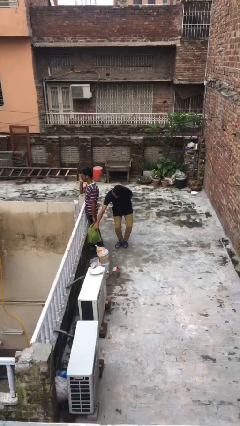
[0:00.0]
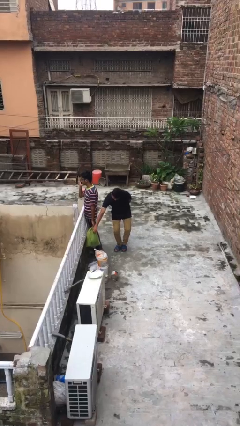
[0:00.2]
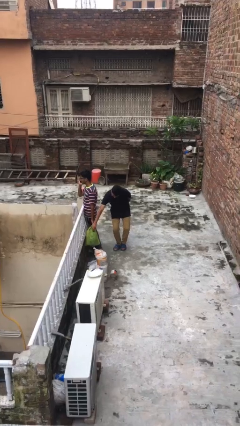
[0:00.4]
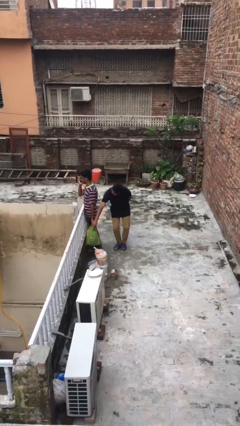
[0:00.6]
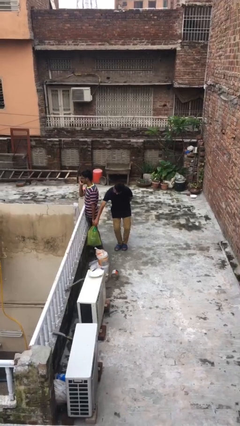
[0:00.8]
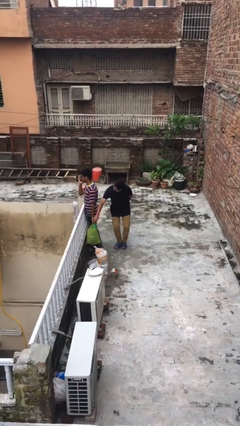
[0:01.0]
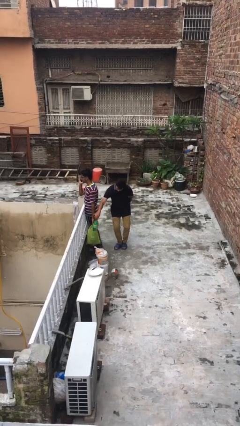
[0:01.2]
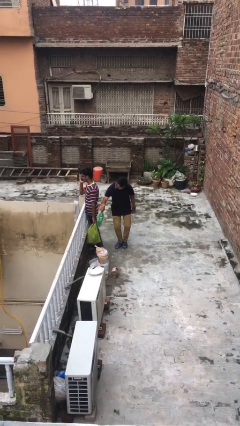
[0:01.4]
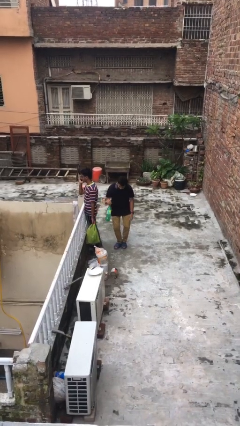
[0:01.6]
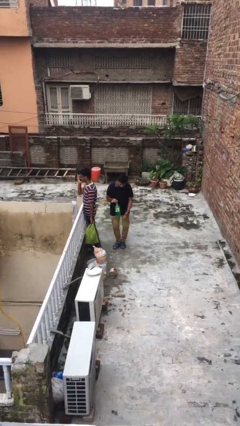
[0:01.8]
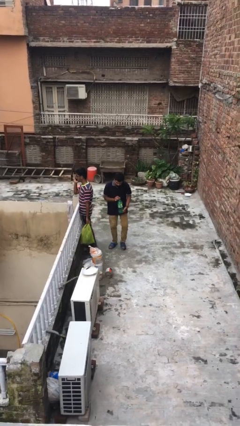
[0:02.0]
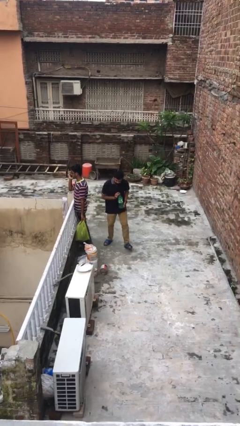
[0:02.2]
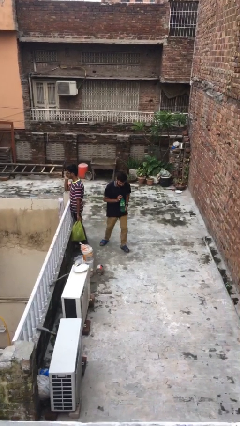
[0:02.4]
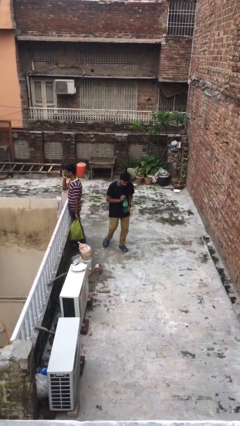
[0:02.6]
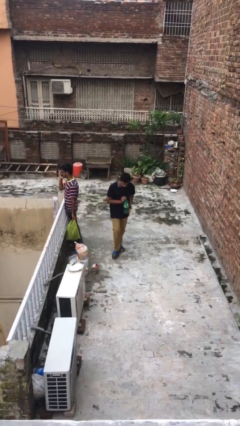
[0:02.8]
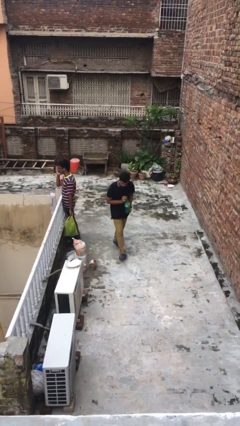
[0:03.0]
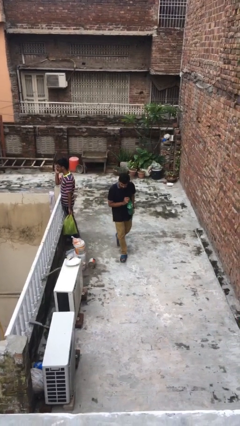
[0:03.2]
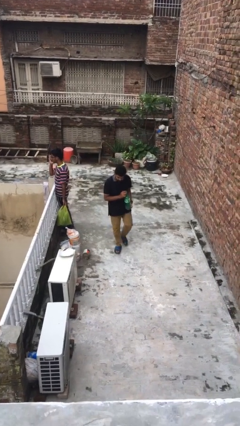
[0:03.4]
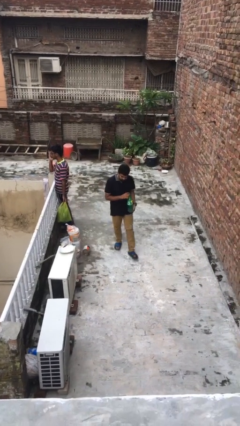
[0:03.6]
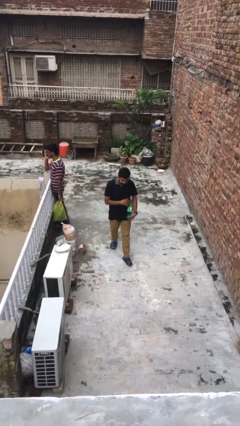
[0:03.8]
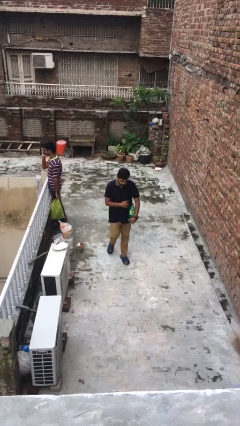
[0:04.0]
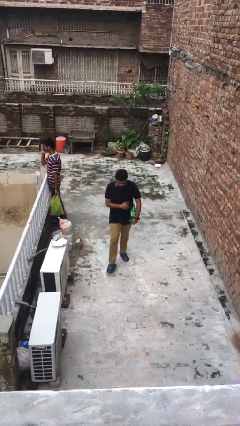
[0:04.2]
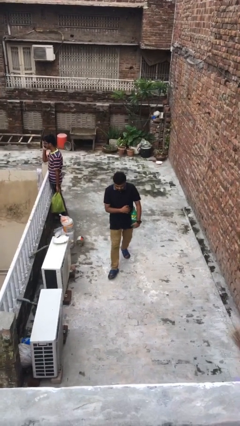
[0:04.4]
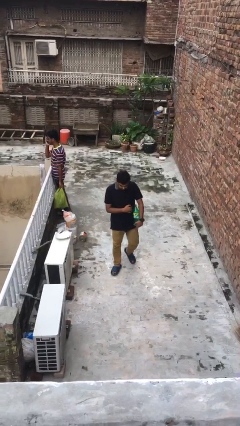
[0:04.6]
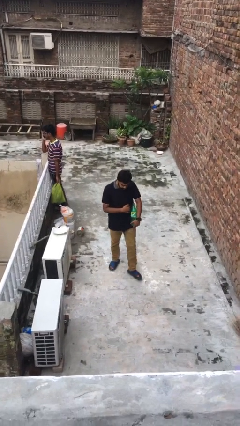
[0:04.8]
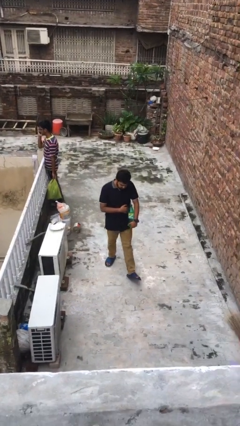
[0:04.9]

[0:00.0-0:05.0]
person steals object from person

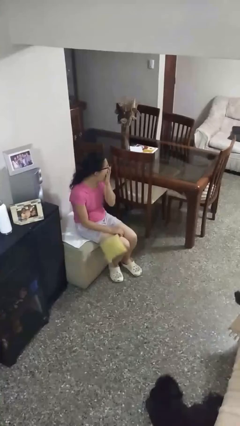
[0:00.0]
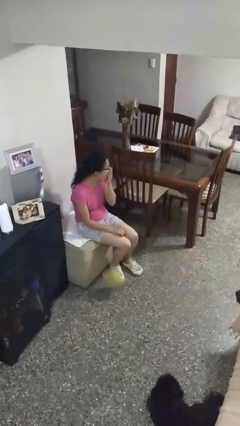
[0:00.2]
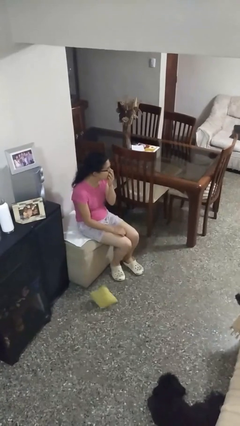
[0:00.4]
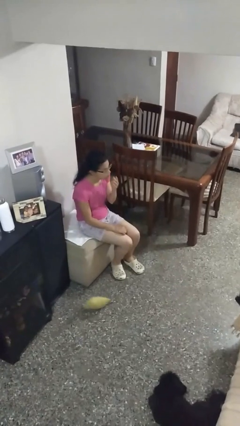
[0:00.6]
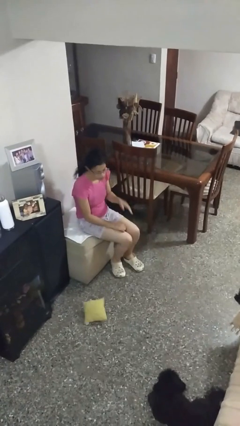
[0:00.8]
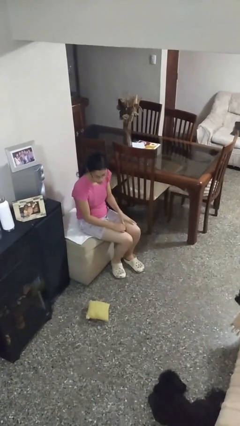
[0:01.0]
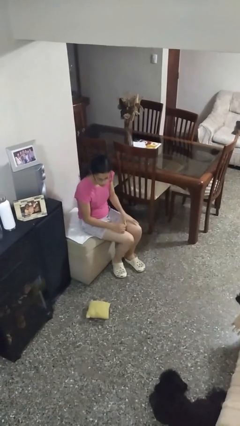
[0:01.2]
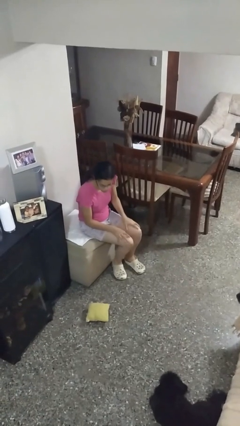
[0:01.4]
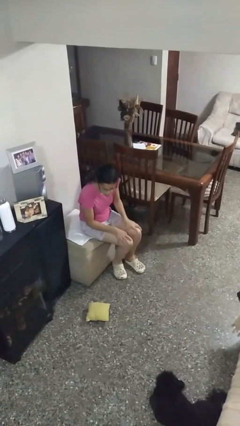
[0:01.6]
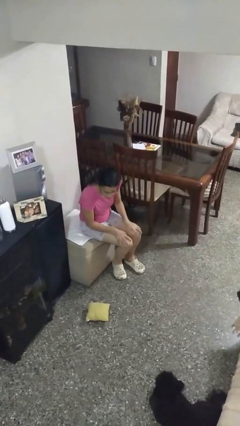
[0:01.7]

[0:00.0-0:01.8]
person drops object

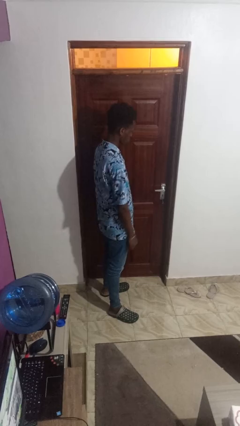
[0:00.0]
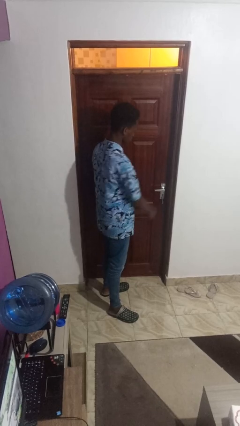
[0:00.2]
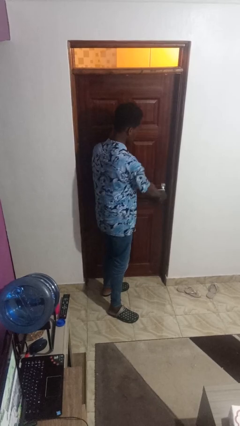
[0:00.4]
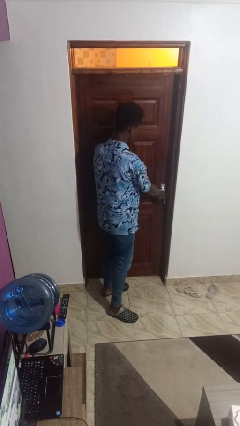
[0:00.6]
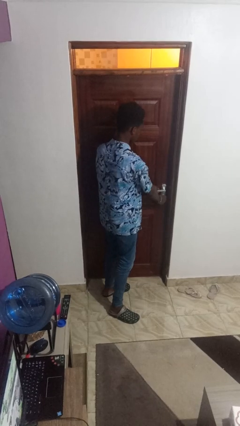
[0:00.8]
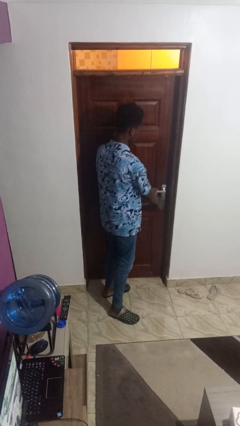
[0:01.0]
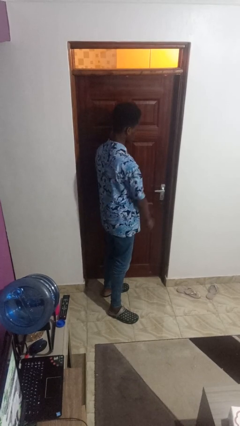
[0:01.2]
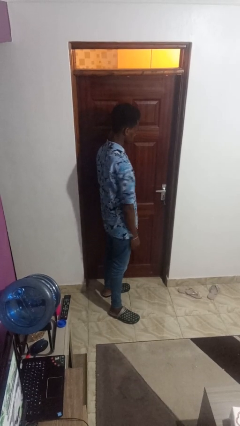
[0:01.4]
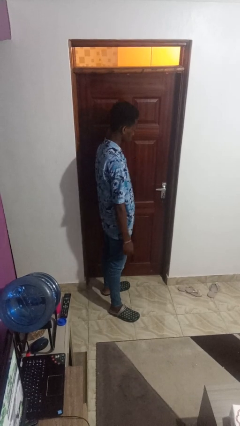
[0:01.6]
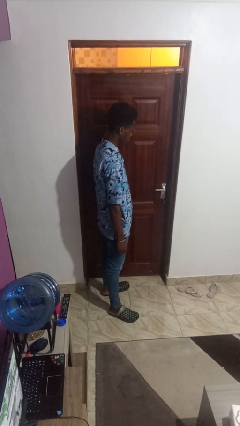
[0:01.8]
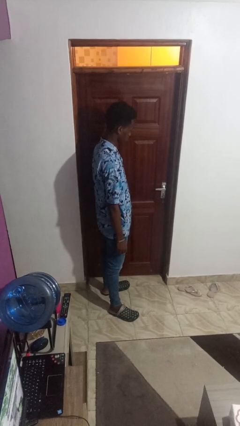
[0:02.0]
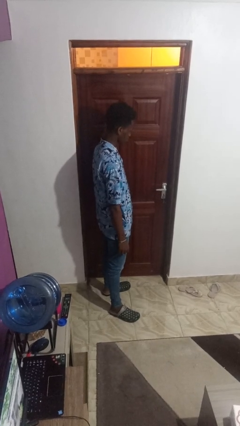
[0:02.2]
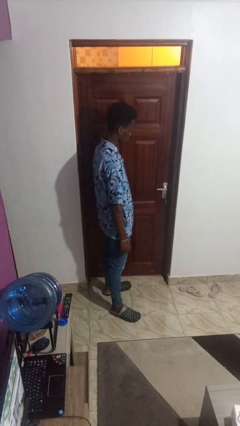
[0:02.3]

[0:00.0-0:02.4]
person unlocks door with keys

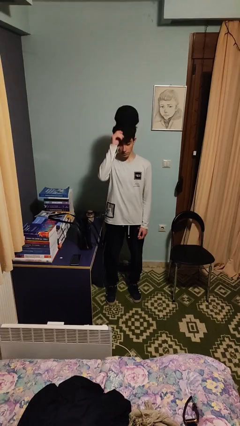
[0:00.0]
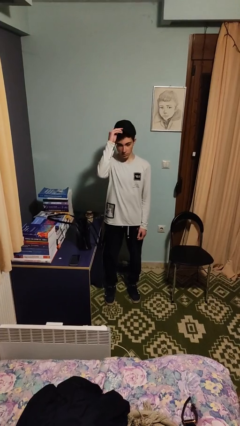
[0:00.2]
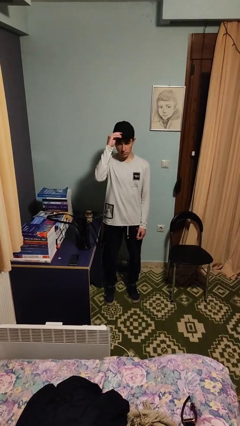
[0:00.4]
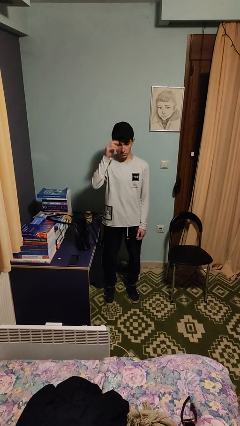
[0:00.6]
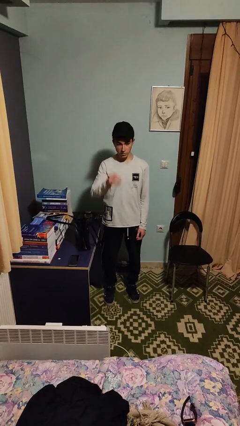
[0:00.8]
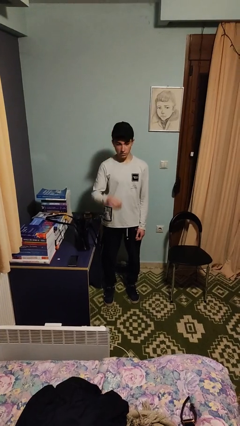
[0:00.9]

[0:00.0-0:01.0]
person puts on hat

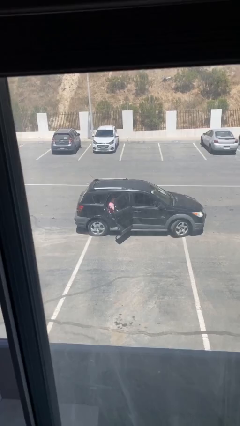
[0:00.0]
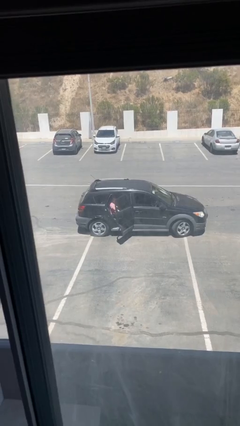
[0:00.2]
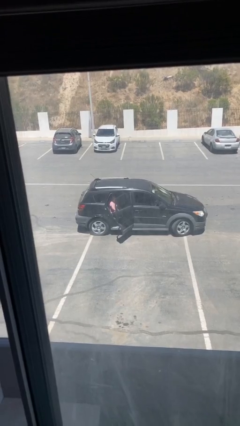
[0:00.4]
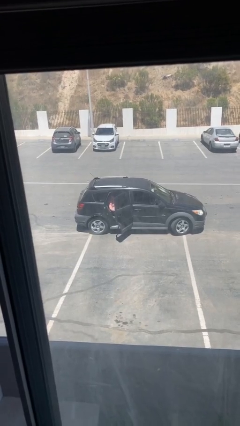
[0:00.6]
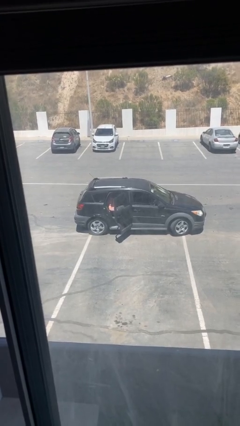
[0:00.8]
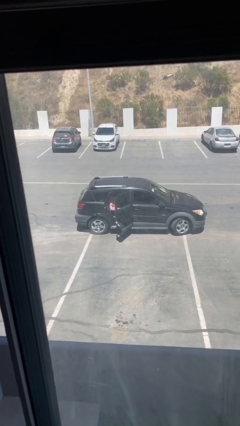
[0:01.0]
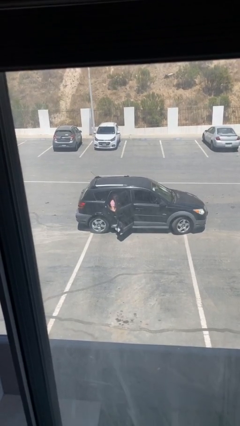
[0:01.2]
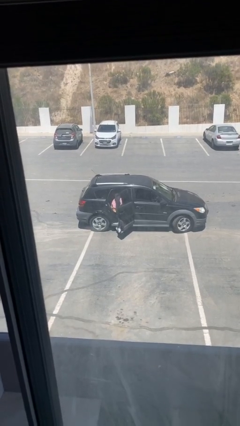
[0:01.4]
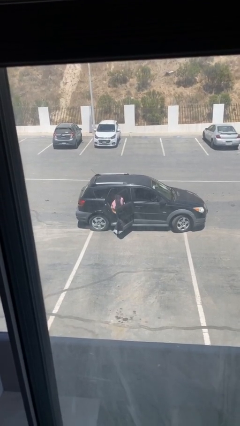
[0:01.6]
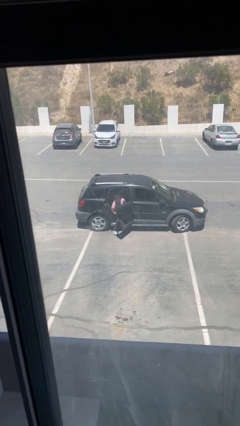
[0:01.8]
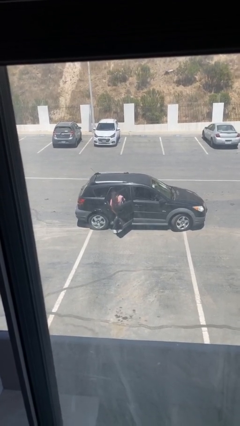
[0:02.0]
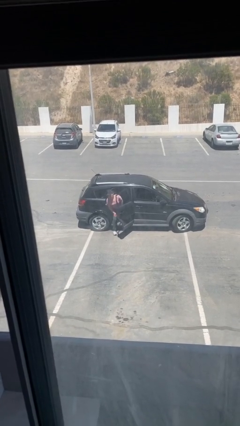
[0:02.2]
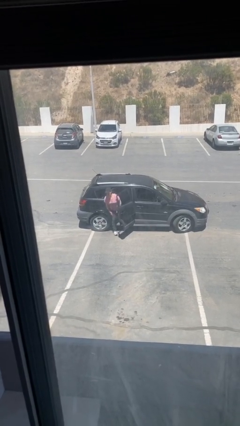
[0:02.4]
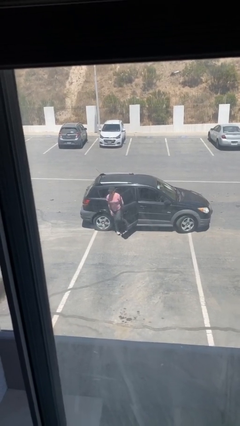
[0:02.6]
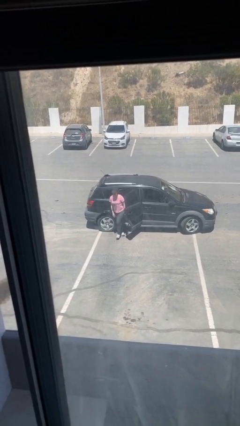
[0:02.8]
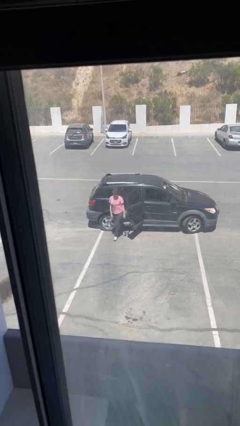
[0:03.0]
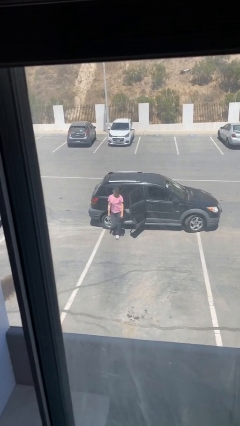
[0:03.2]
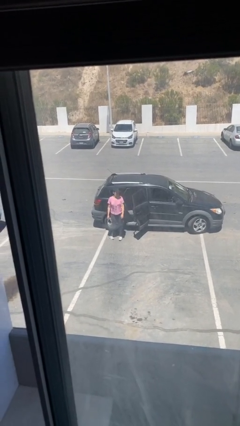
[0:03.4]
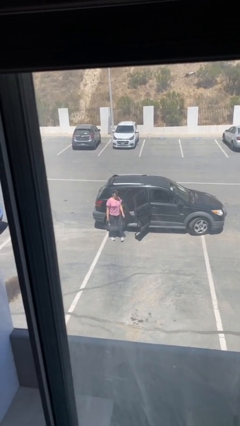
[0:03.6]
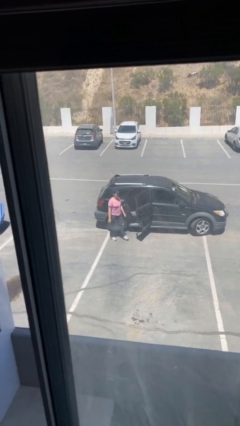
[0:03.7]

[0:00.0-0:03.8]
person exits car

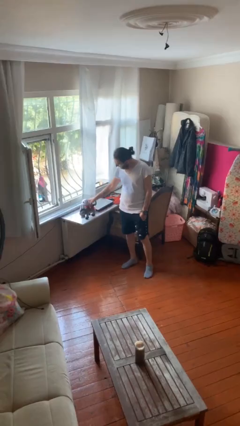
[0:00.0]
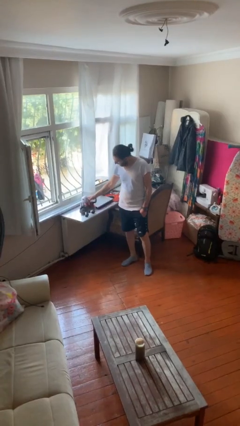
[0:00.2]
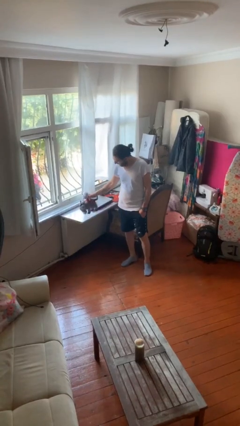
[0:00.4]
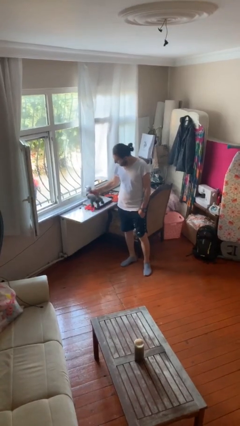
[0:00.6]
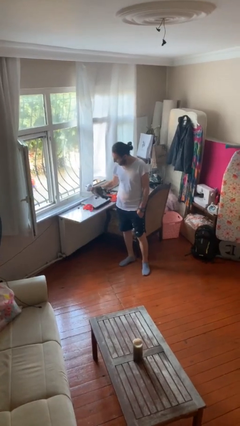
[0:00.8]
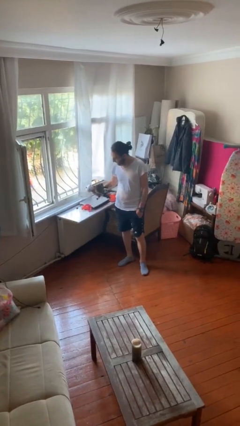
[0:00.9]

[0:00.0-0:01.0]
person picks up object from table

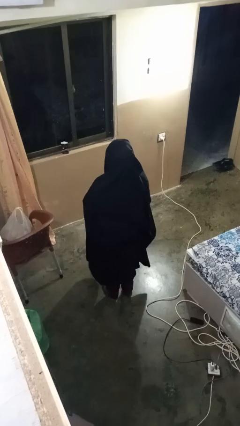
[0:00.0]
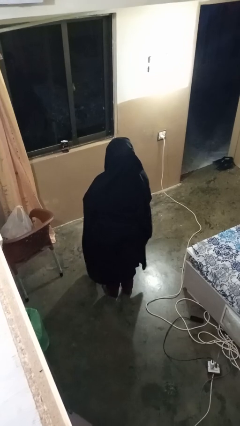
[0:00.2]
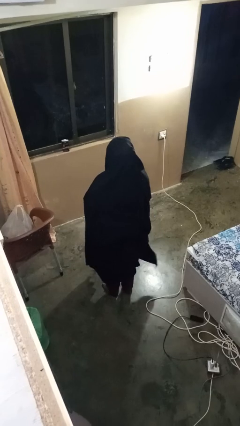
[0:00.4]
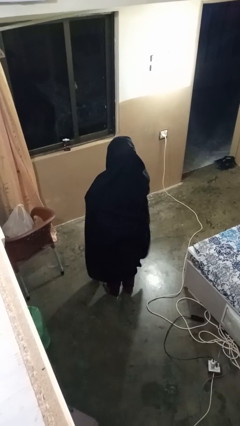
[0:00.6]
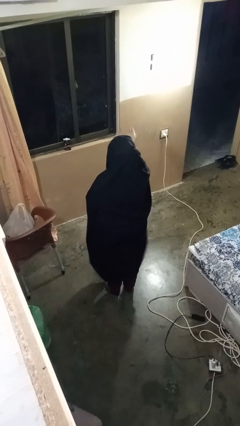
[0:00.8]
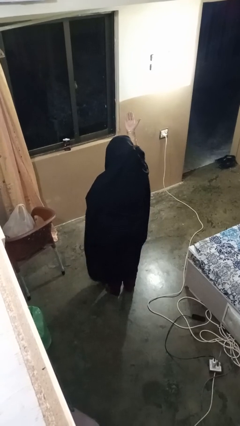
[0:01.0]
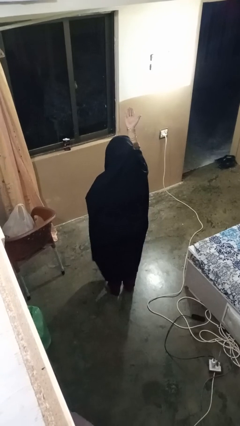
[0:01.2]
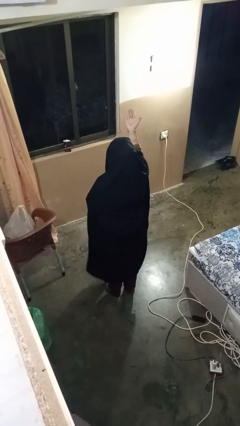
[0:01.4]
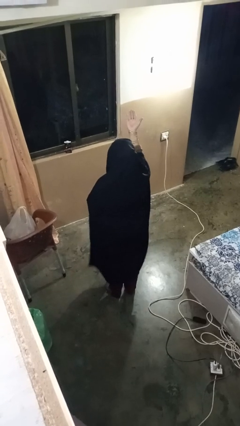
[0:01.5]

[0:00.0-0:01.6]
person gestures swipe up

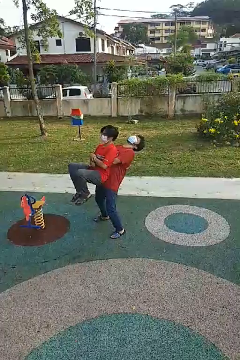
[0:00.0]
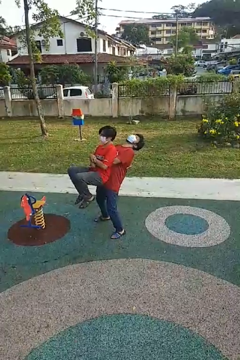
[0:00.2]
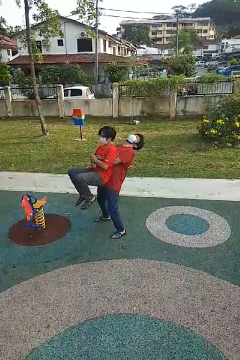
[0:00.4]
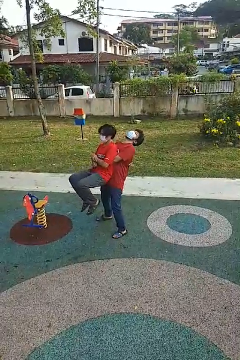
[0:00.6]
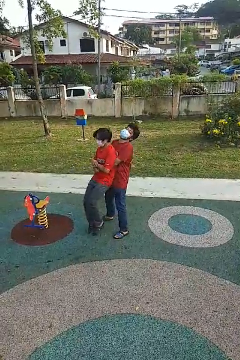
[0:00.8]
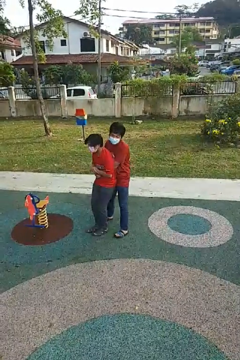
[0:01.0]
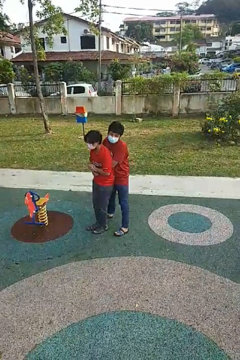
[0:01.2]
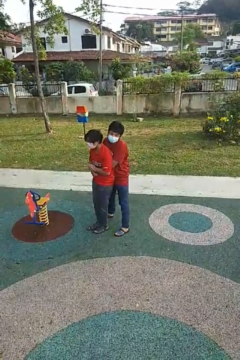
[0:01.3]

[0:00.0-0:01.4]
person puts down person
